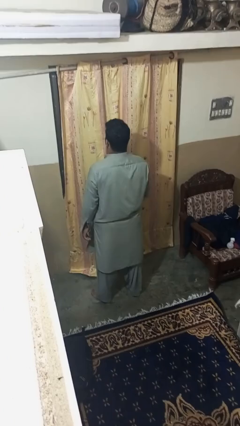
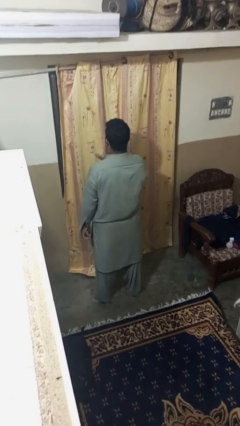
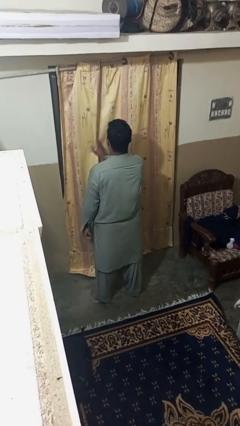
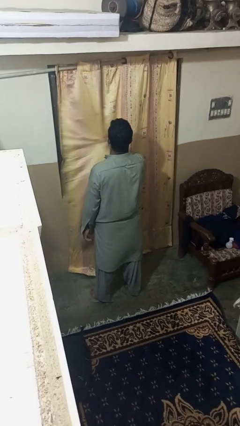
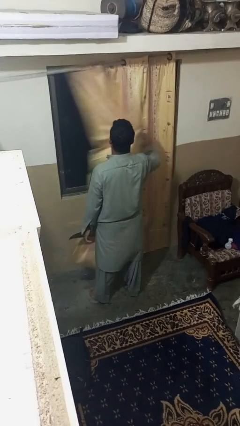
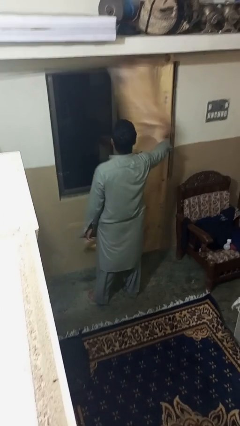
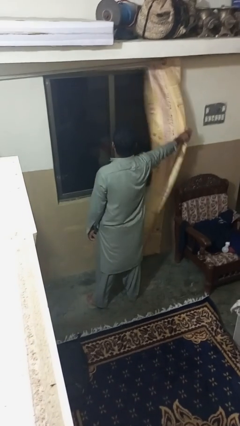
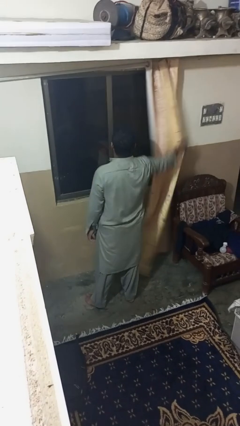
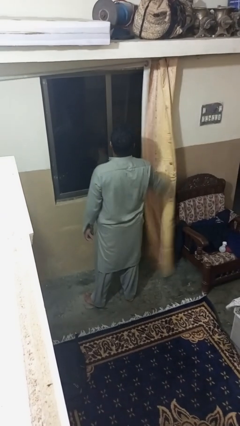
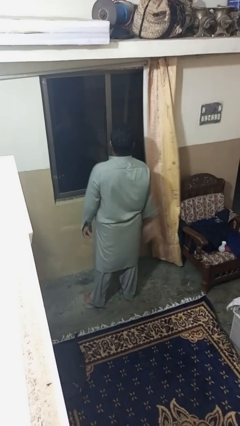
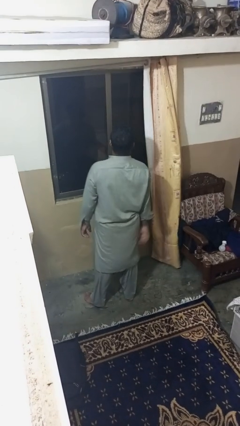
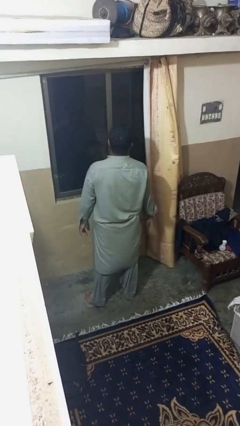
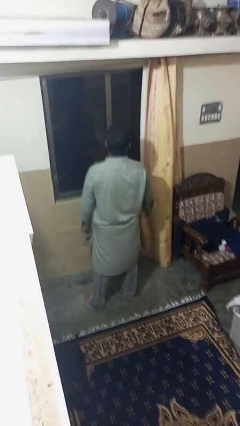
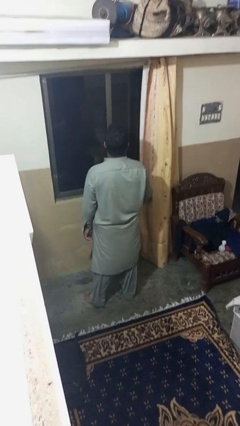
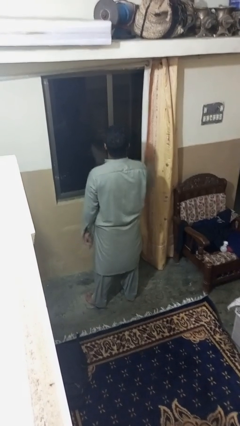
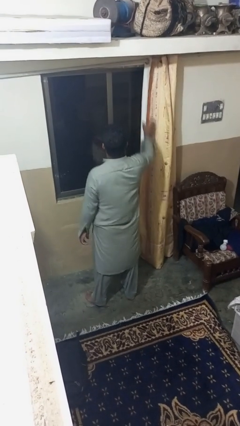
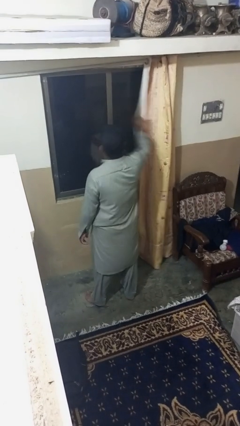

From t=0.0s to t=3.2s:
person opens curtains

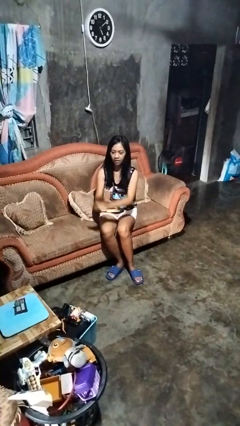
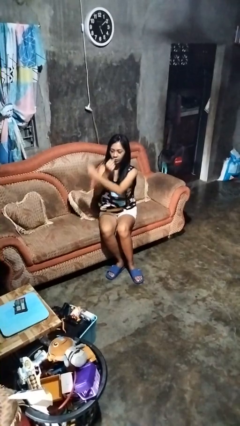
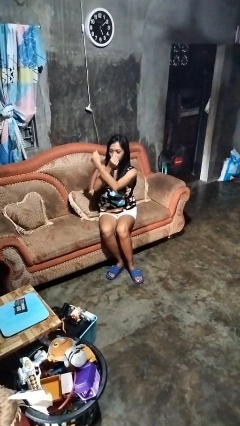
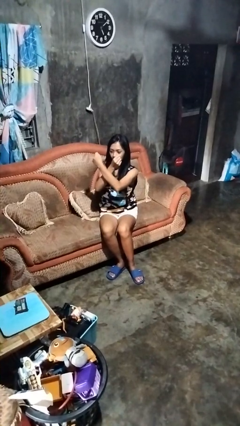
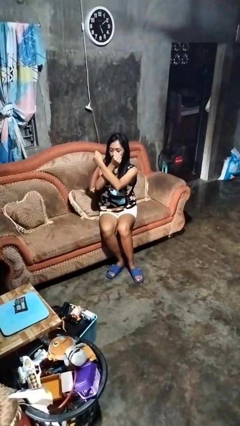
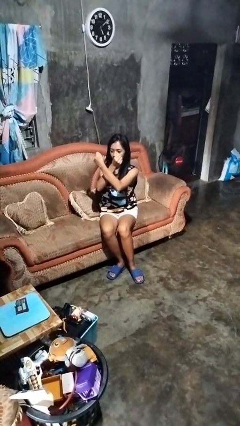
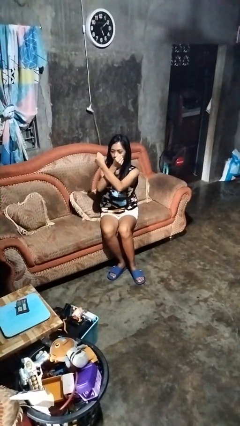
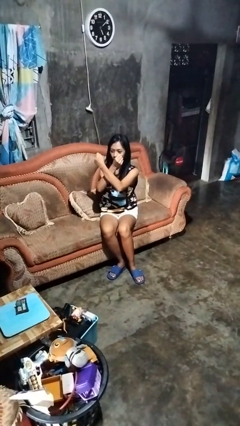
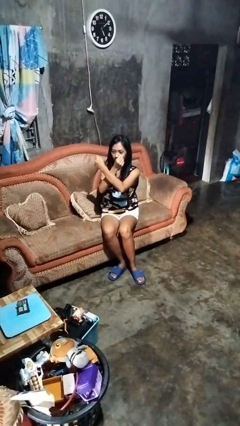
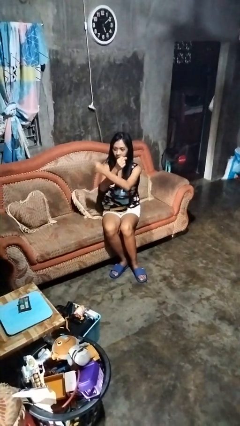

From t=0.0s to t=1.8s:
person gestures arms x

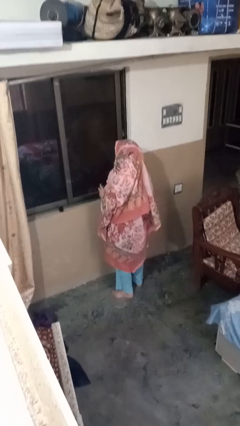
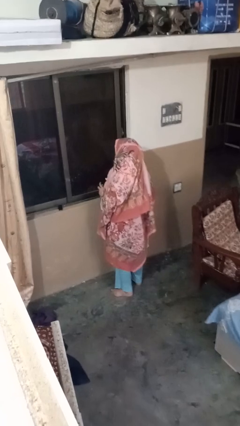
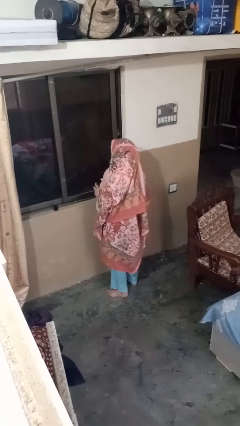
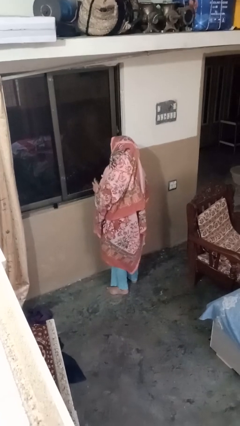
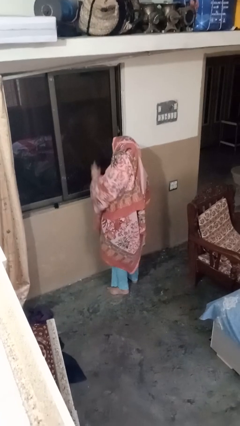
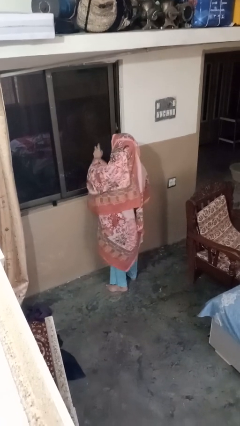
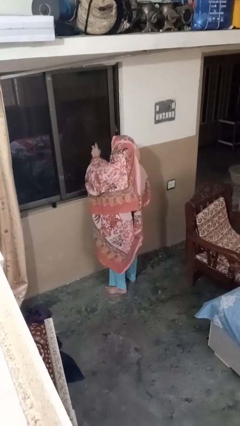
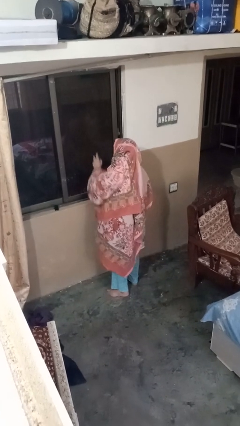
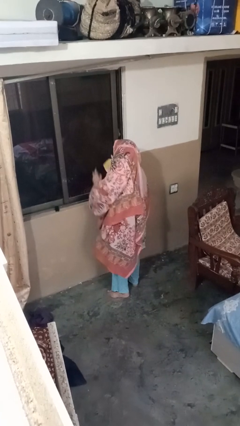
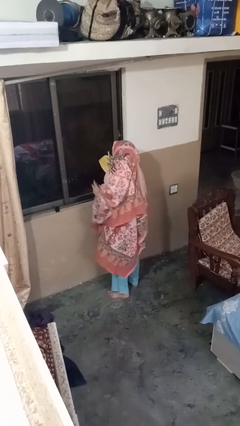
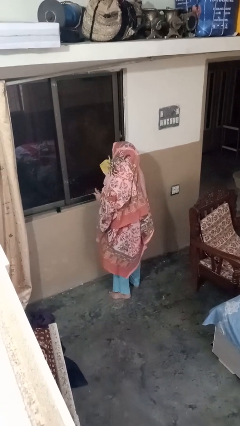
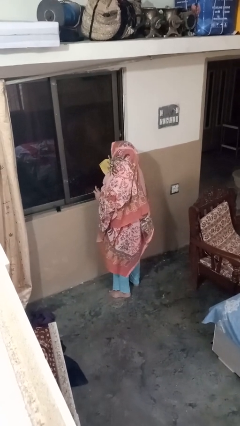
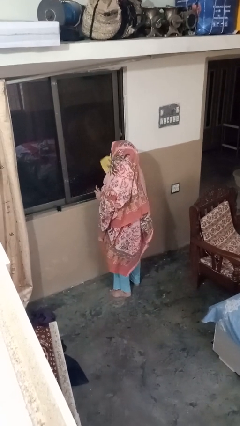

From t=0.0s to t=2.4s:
person sprays from bottle

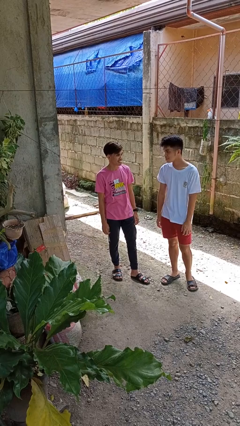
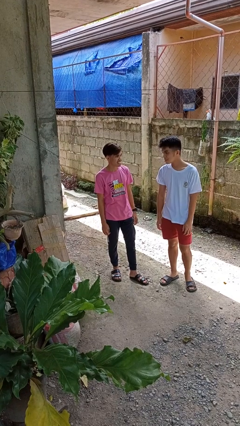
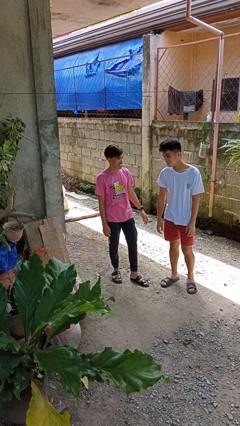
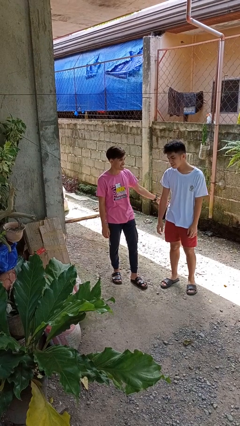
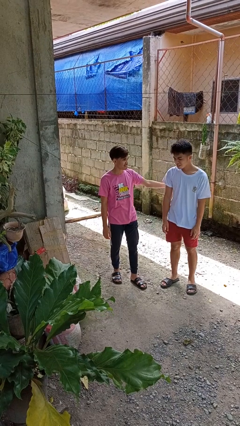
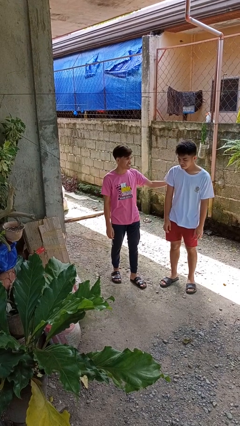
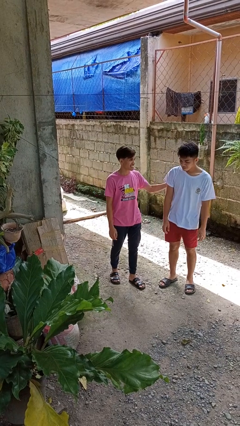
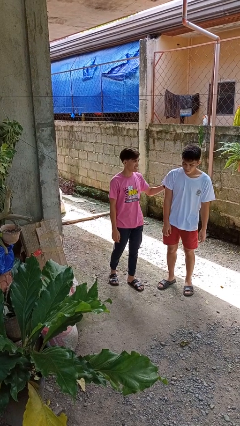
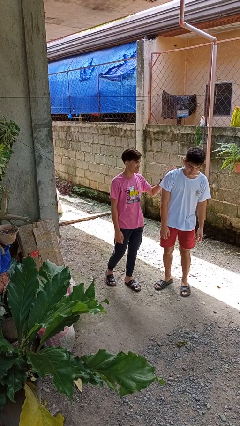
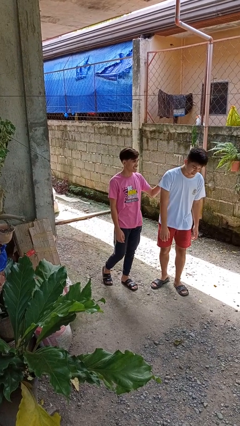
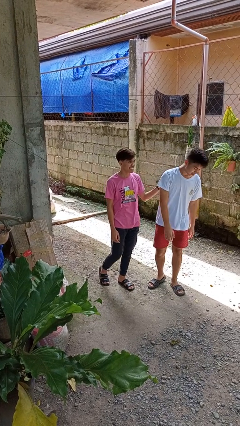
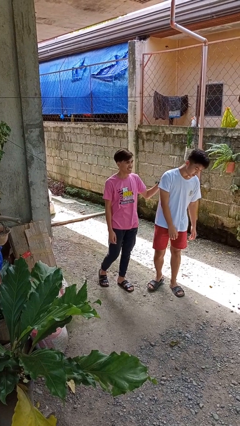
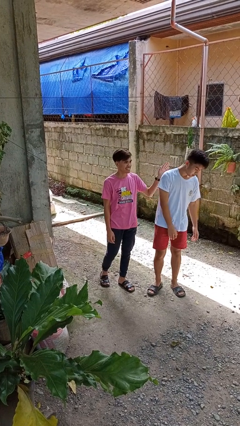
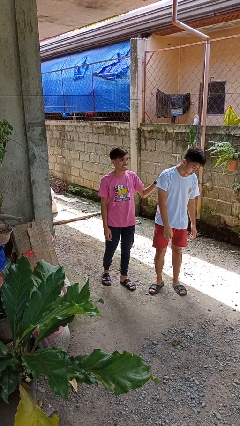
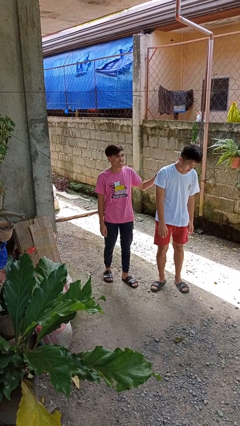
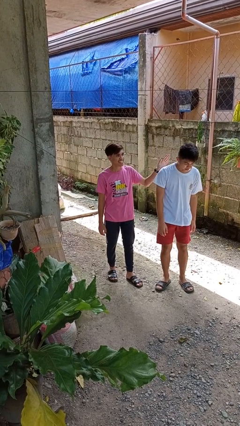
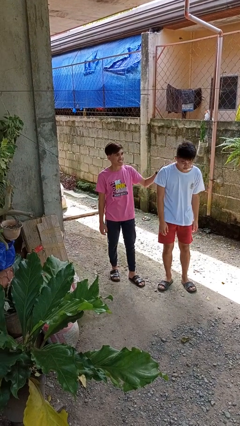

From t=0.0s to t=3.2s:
person touches back of person

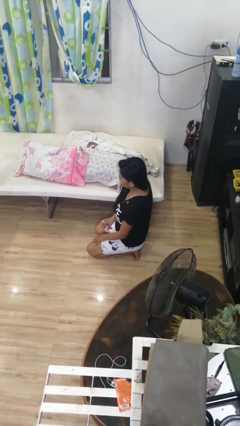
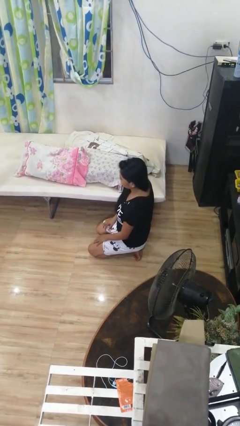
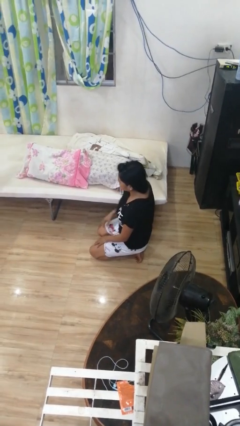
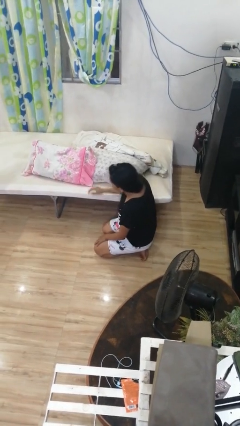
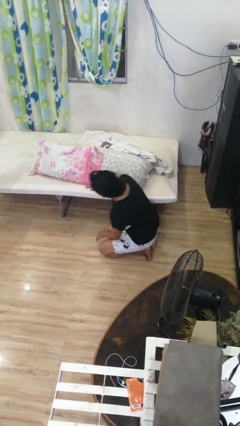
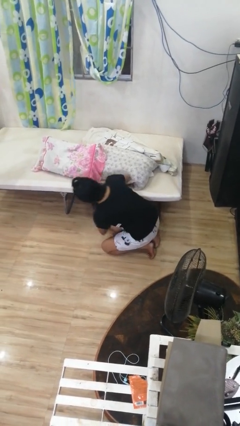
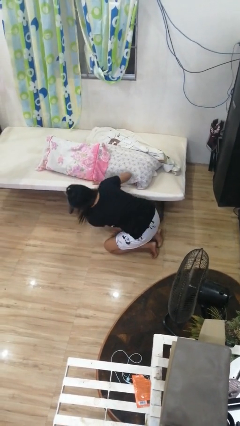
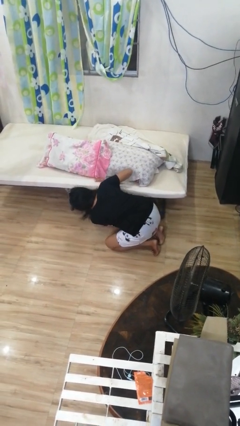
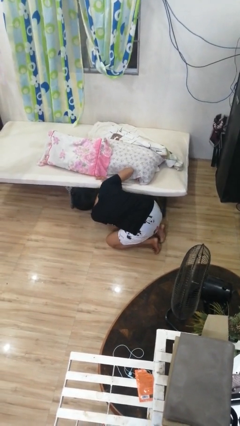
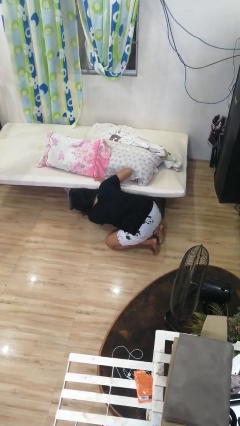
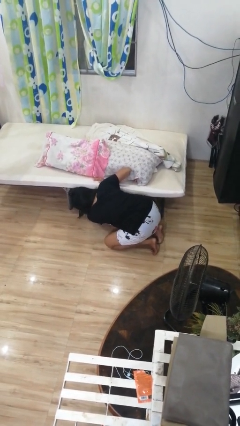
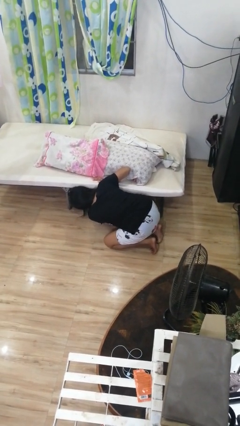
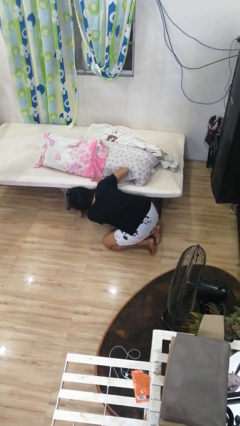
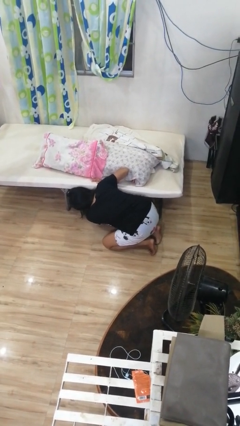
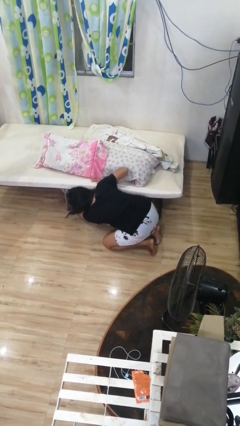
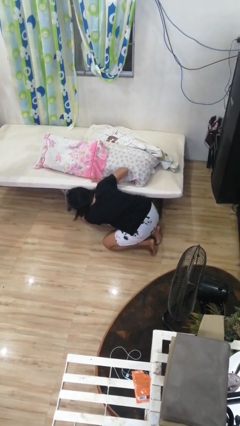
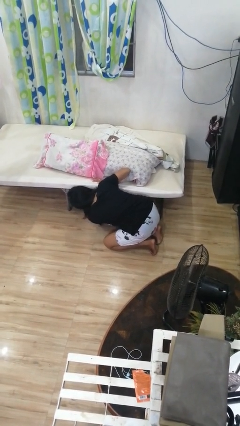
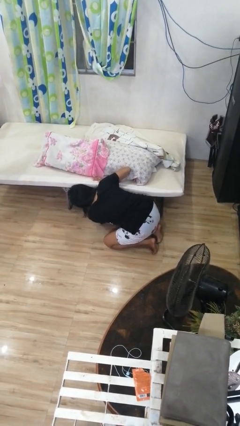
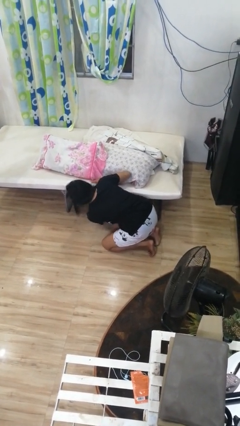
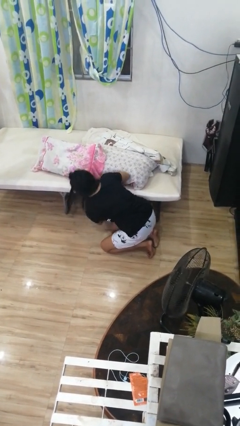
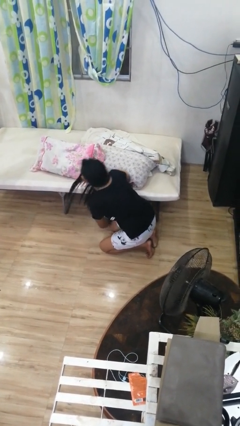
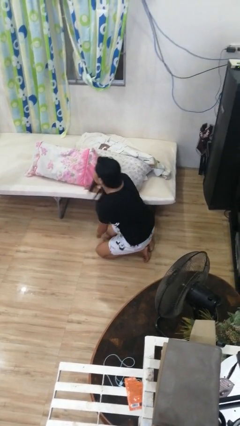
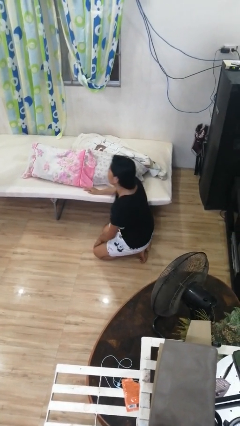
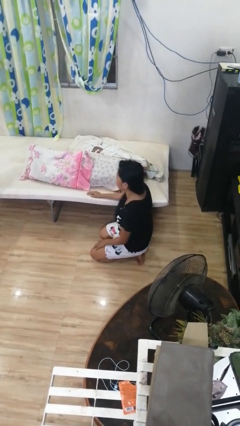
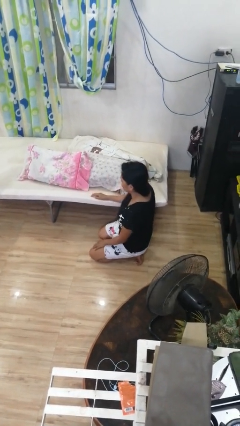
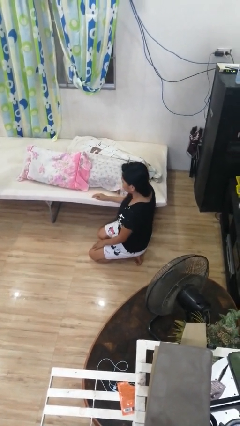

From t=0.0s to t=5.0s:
person searches under bed

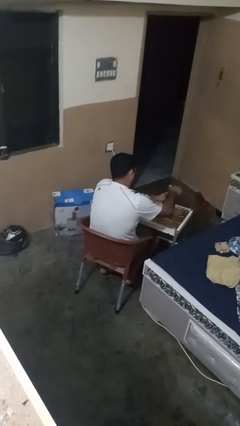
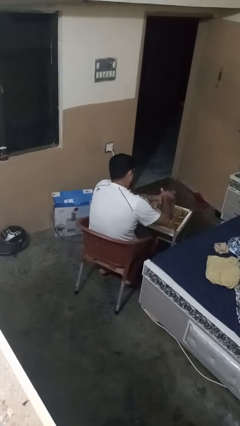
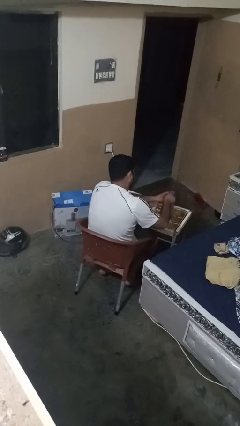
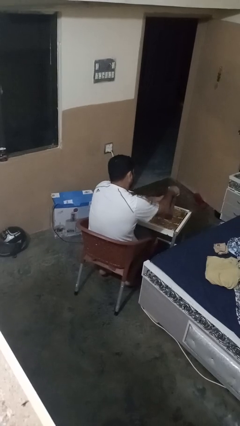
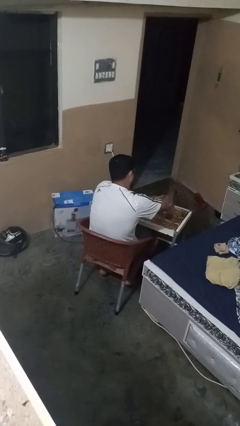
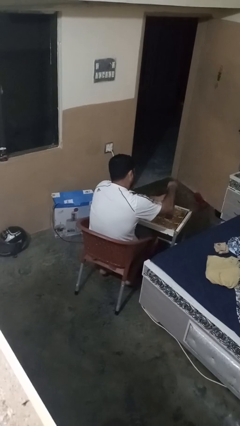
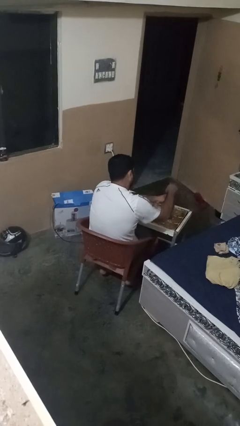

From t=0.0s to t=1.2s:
person unscrews lid from bottle

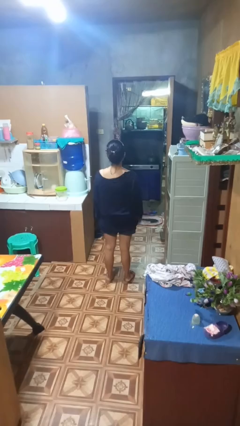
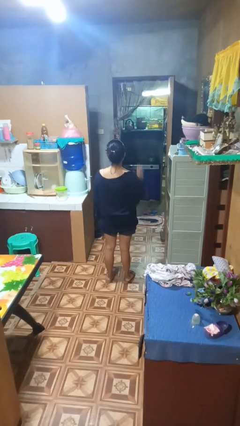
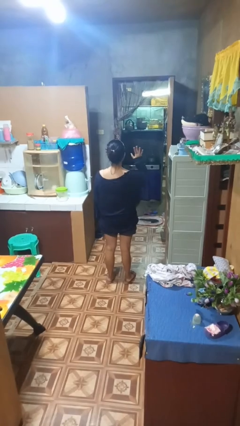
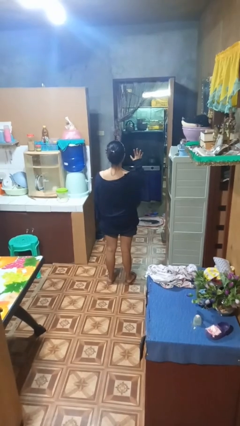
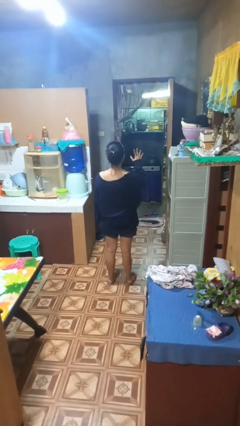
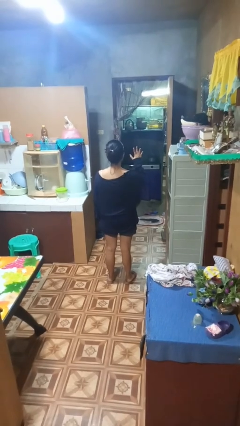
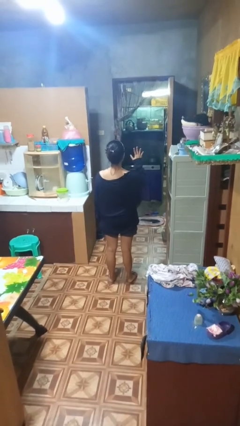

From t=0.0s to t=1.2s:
person gestures number five
